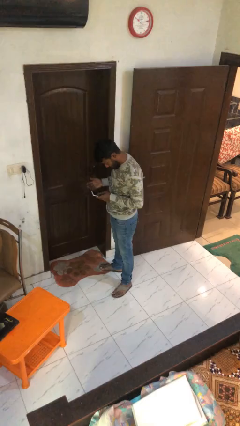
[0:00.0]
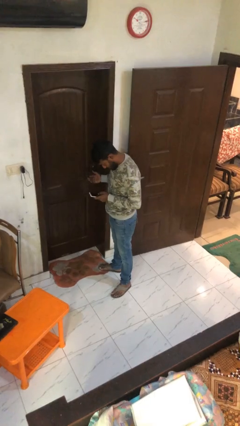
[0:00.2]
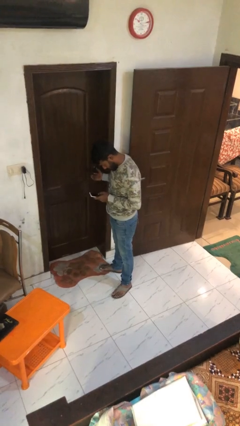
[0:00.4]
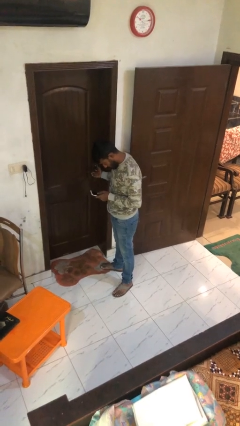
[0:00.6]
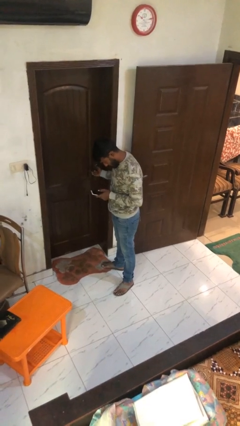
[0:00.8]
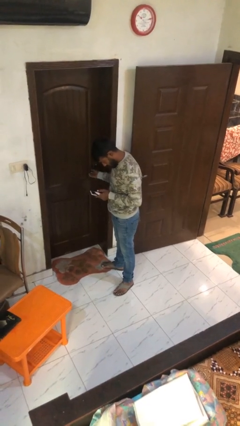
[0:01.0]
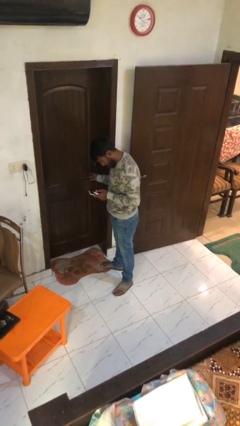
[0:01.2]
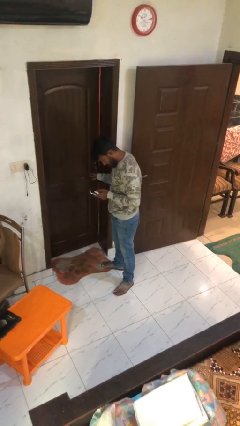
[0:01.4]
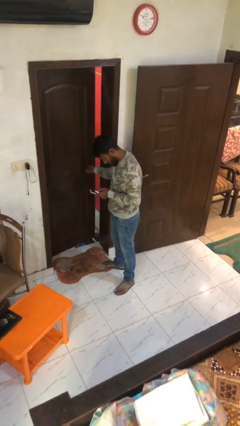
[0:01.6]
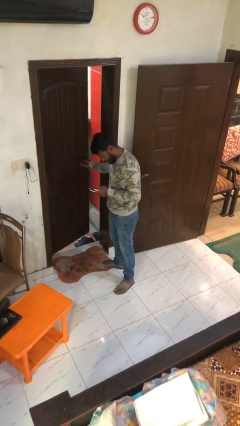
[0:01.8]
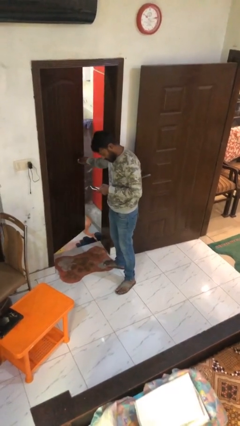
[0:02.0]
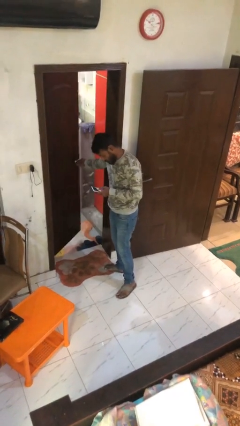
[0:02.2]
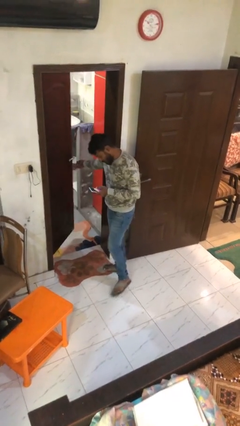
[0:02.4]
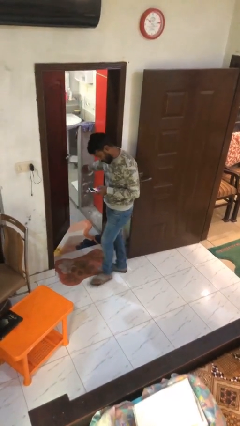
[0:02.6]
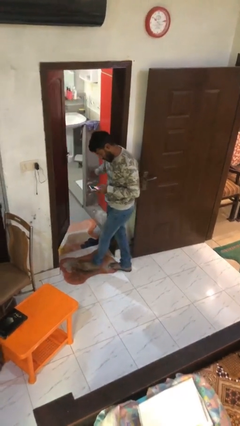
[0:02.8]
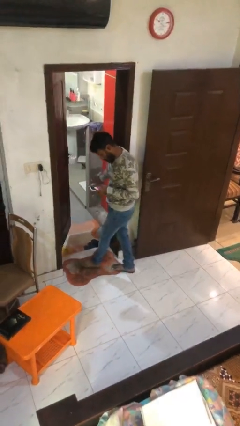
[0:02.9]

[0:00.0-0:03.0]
person opens facility door

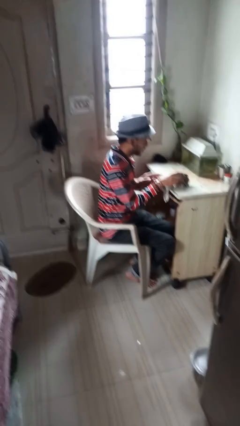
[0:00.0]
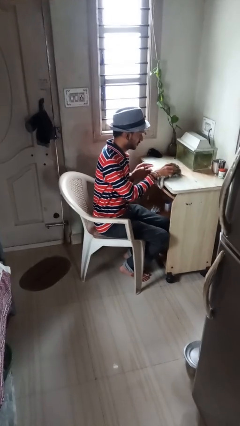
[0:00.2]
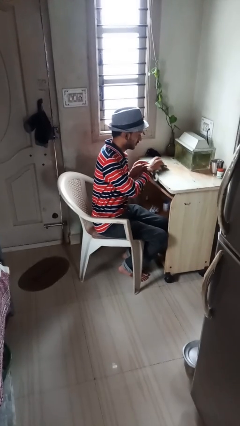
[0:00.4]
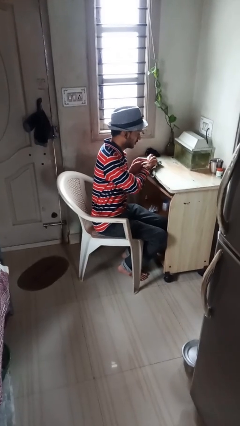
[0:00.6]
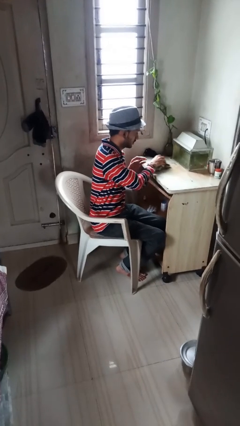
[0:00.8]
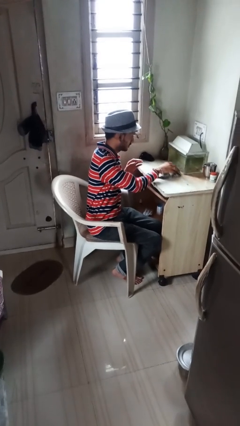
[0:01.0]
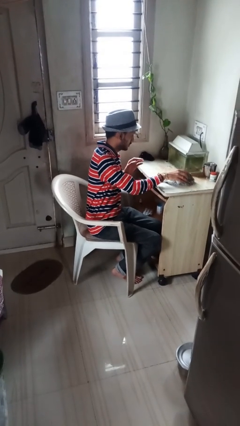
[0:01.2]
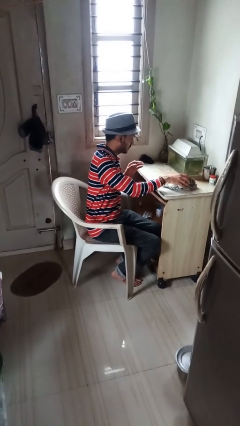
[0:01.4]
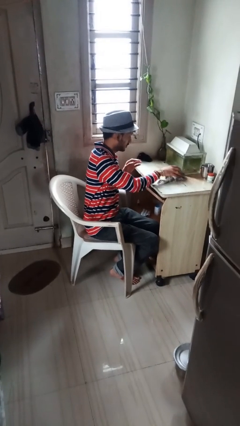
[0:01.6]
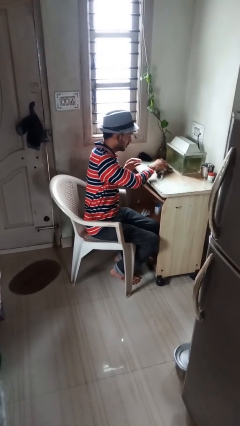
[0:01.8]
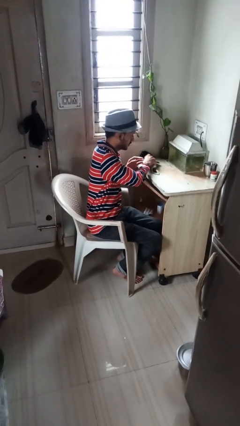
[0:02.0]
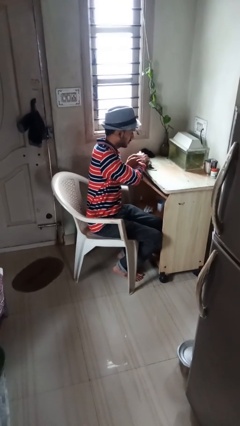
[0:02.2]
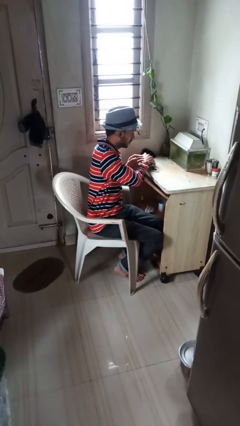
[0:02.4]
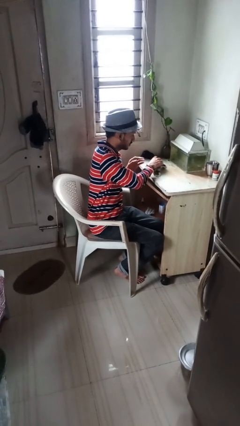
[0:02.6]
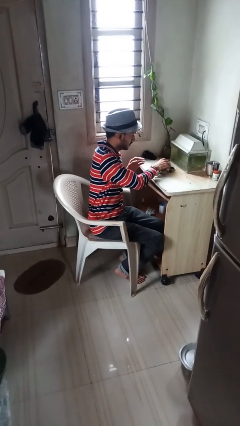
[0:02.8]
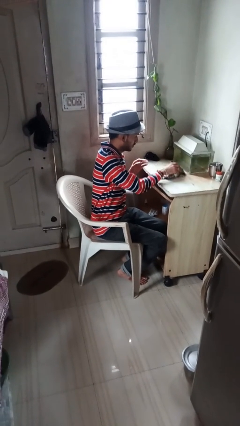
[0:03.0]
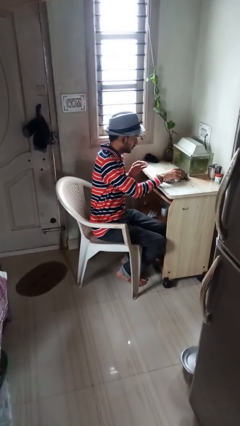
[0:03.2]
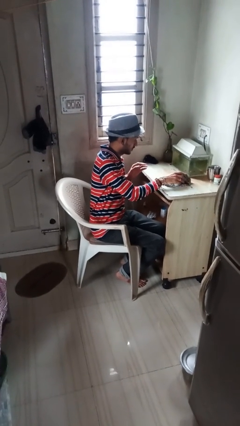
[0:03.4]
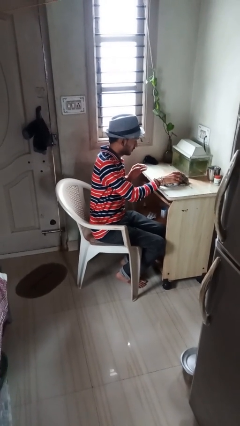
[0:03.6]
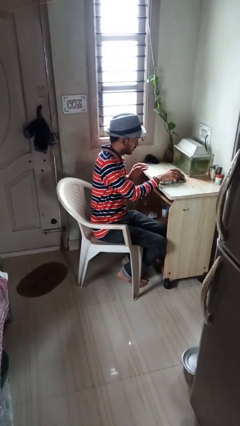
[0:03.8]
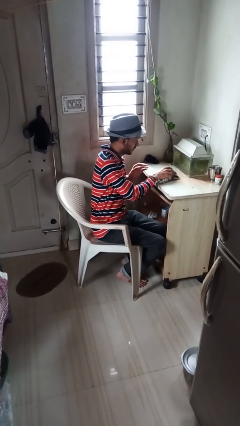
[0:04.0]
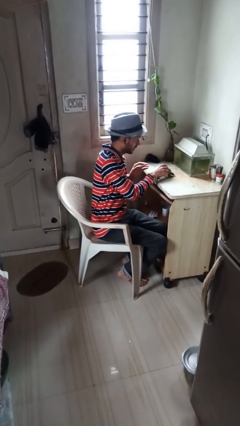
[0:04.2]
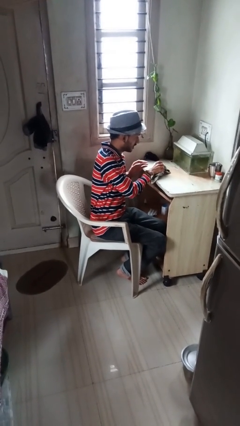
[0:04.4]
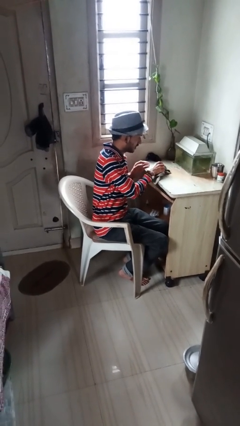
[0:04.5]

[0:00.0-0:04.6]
person cleans table with rag

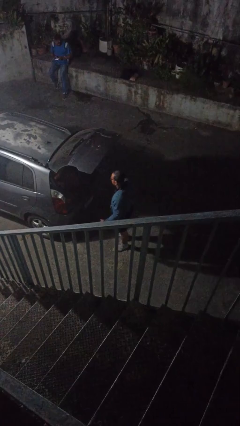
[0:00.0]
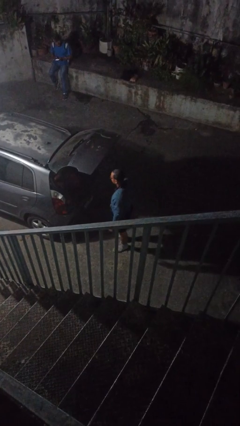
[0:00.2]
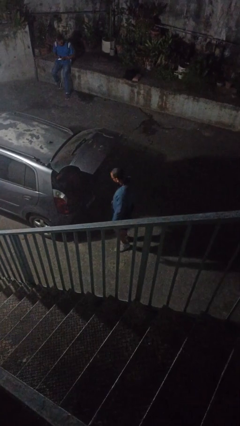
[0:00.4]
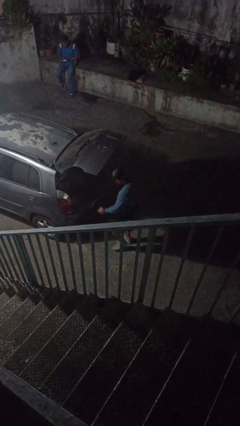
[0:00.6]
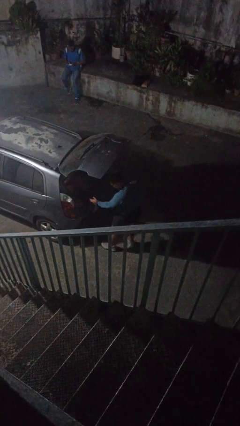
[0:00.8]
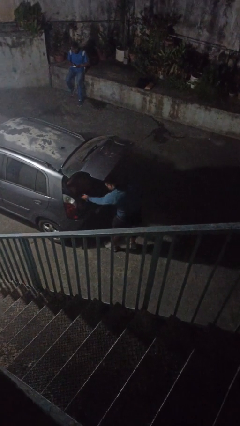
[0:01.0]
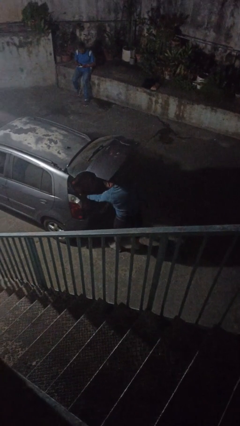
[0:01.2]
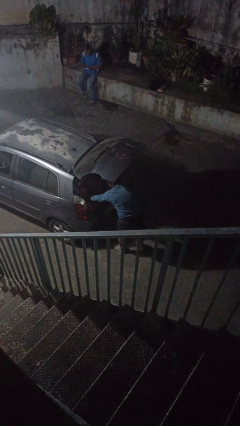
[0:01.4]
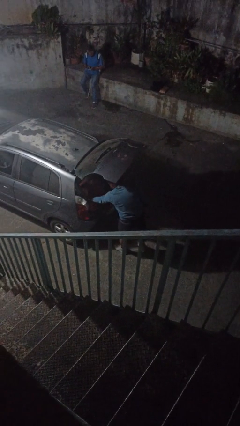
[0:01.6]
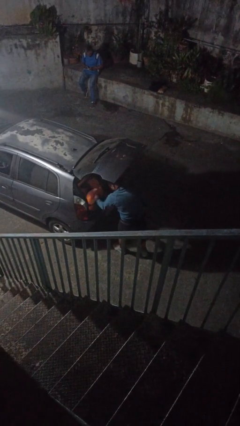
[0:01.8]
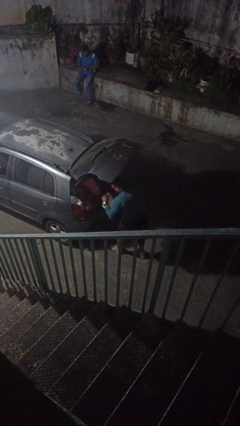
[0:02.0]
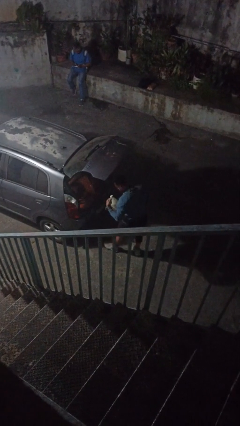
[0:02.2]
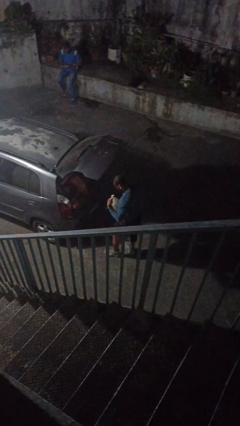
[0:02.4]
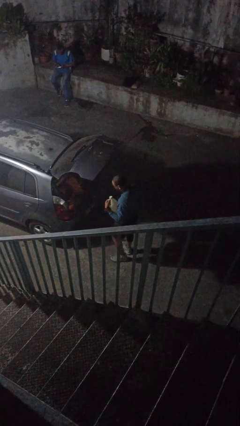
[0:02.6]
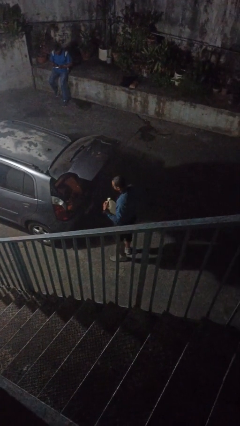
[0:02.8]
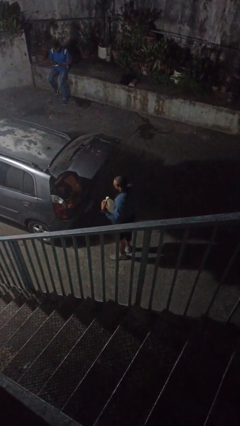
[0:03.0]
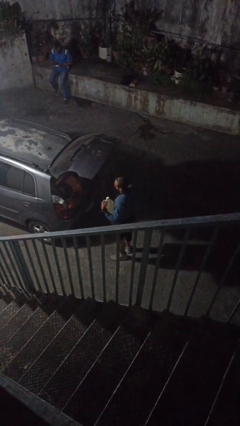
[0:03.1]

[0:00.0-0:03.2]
person unloads car

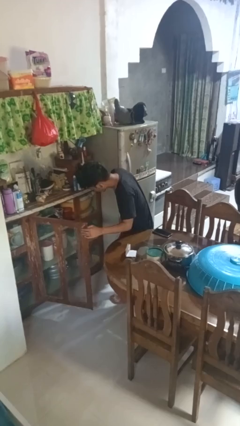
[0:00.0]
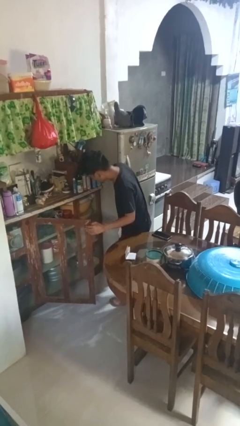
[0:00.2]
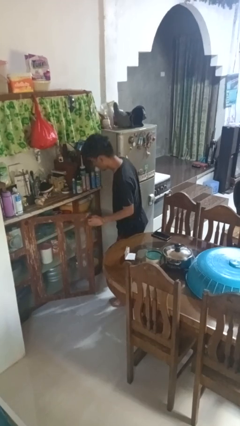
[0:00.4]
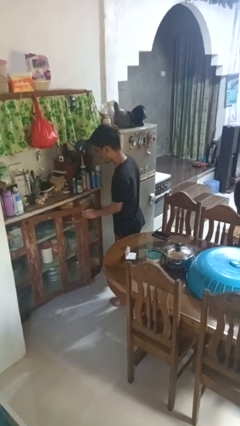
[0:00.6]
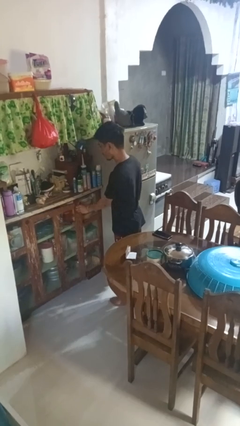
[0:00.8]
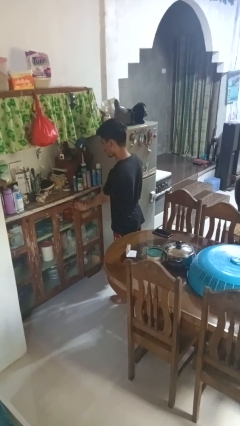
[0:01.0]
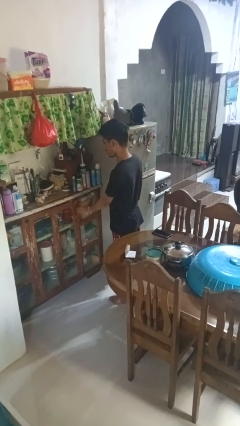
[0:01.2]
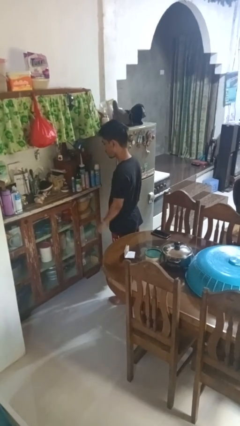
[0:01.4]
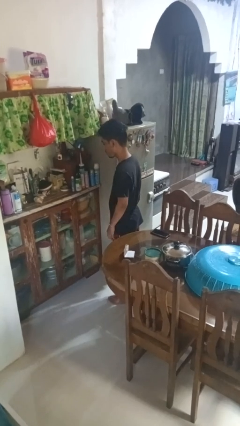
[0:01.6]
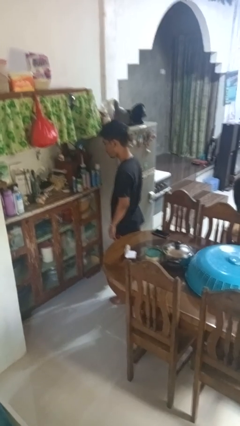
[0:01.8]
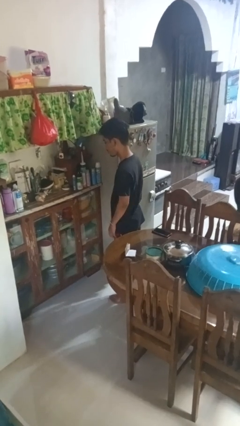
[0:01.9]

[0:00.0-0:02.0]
person closes cabinet

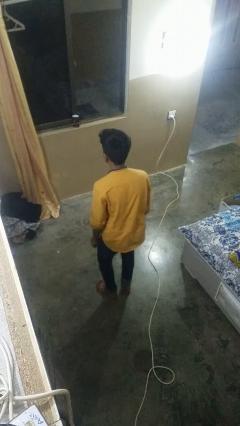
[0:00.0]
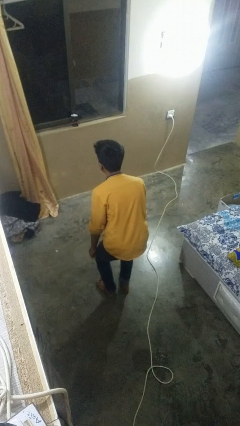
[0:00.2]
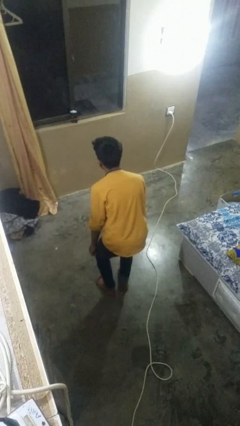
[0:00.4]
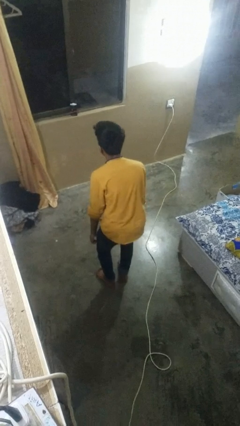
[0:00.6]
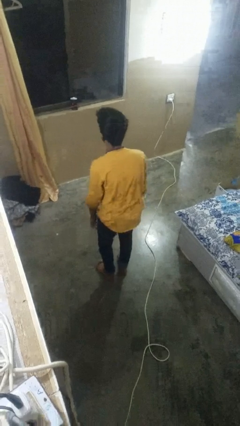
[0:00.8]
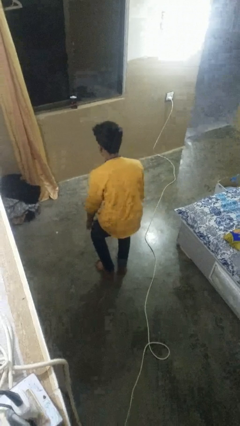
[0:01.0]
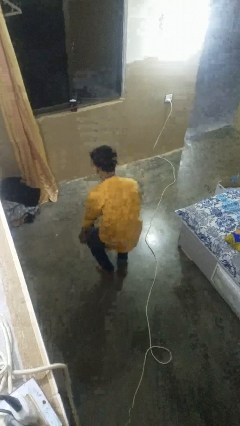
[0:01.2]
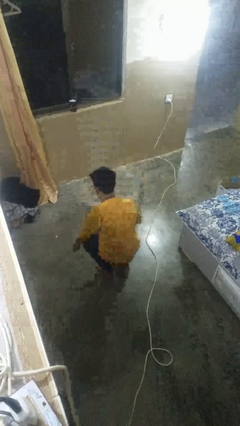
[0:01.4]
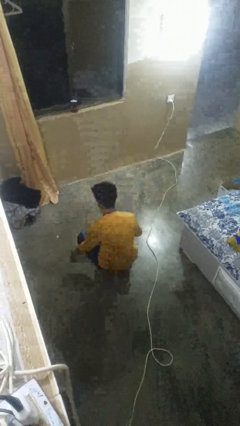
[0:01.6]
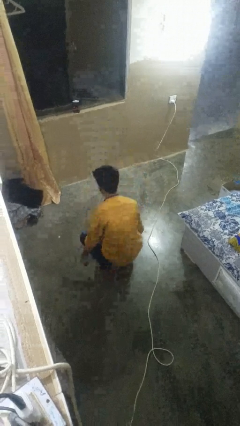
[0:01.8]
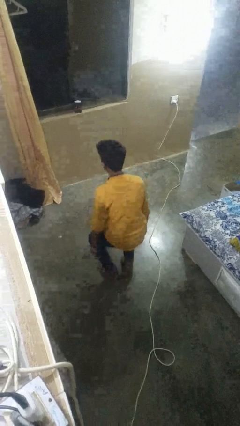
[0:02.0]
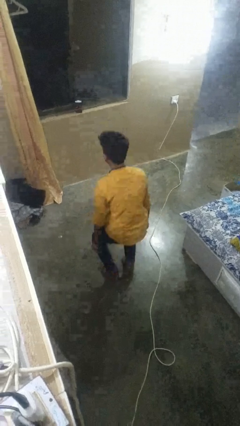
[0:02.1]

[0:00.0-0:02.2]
person exercises with situp

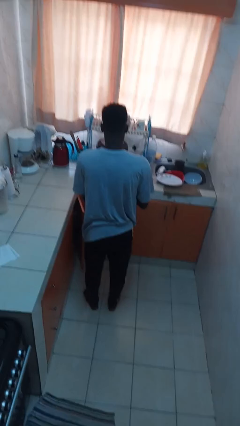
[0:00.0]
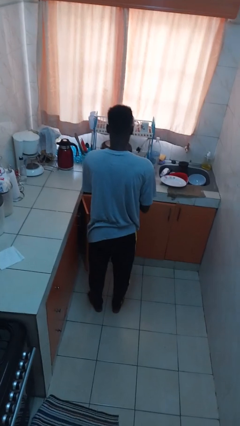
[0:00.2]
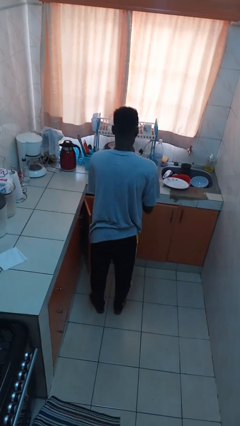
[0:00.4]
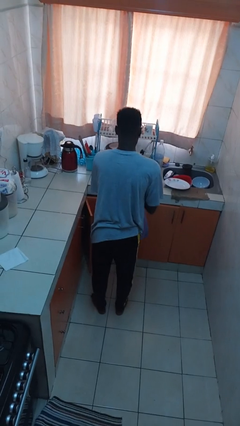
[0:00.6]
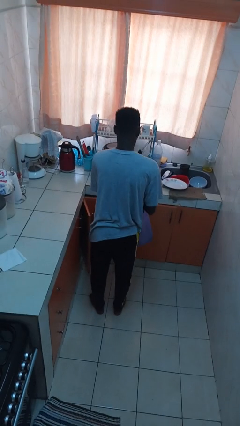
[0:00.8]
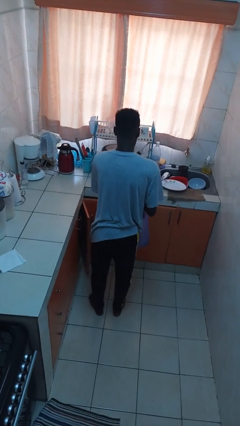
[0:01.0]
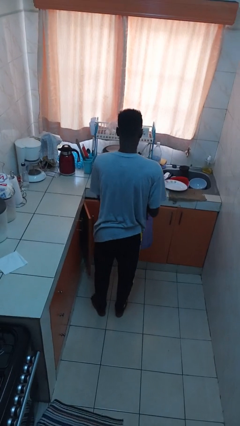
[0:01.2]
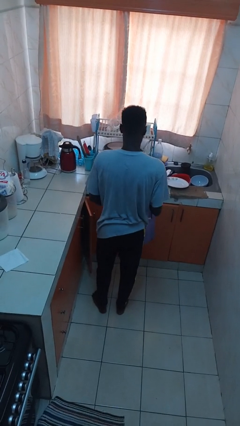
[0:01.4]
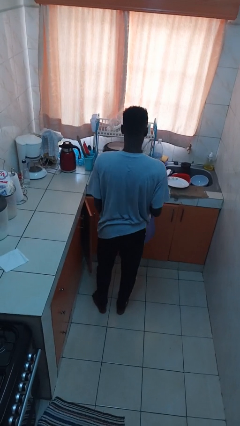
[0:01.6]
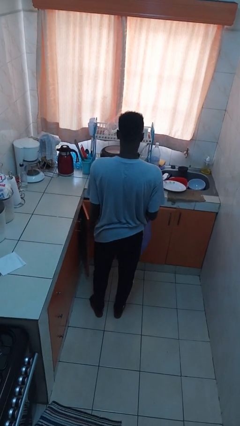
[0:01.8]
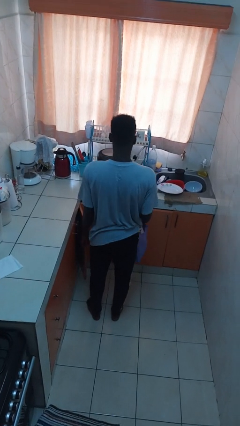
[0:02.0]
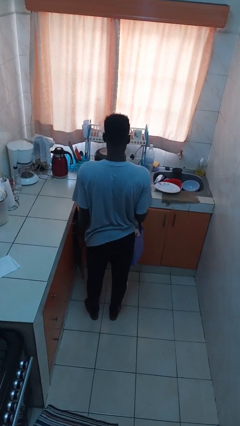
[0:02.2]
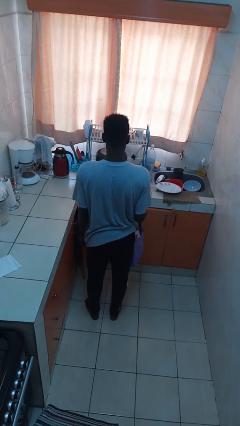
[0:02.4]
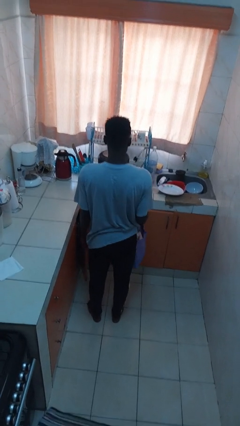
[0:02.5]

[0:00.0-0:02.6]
person puts object into bag
